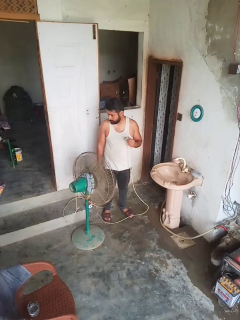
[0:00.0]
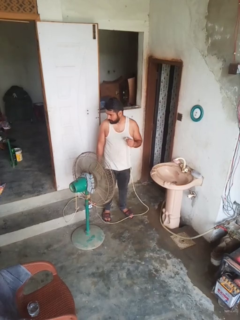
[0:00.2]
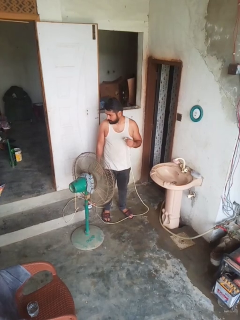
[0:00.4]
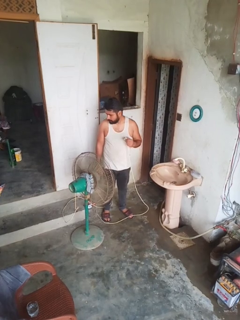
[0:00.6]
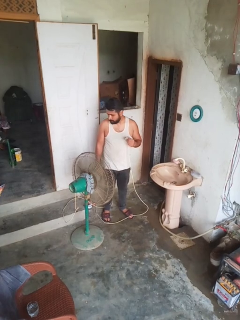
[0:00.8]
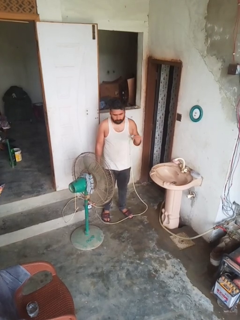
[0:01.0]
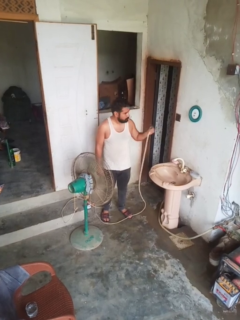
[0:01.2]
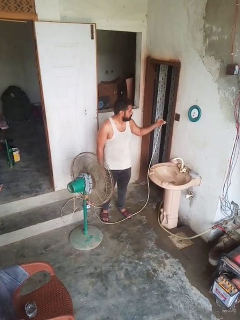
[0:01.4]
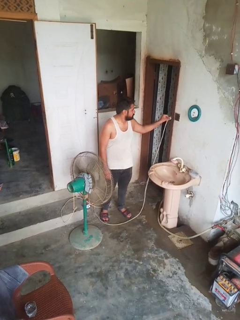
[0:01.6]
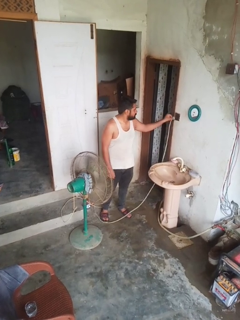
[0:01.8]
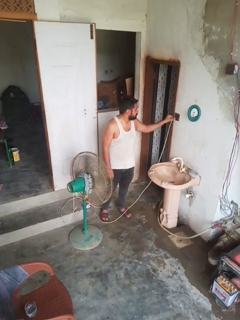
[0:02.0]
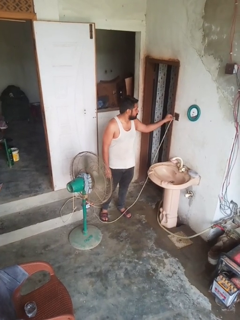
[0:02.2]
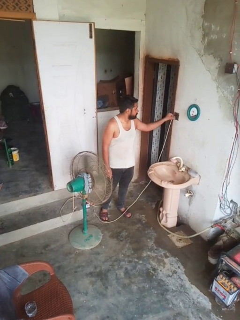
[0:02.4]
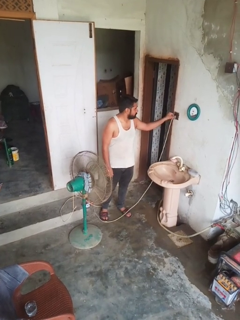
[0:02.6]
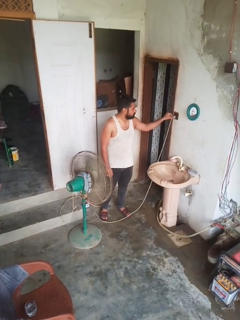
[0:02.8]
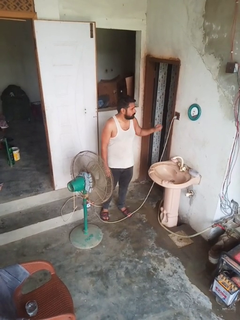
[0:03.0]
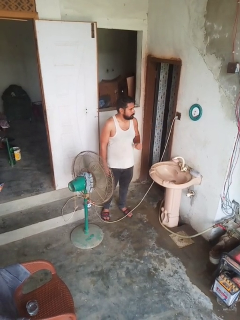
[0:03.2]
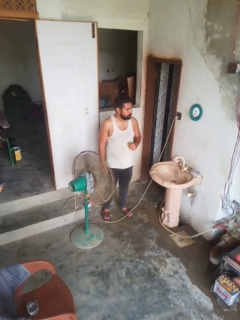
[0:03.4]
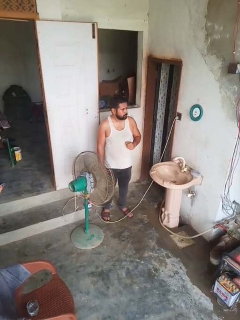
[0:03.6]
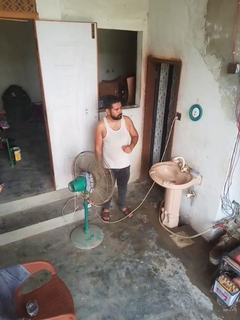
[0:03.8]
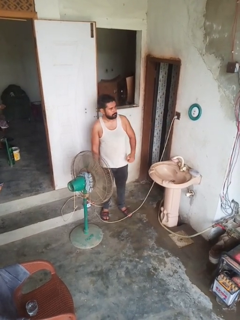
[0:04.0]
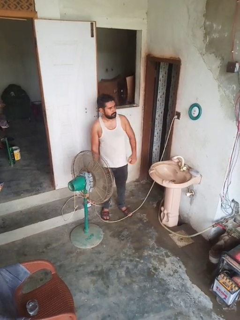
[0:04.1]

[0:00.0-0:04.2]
person turns on fan

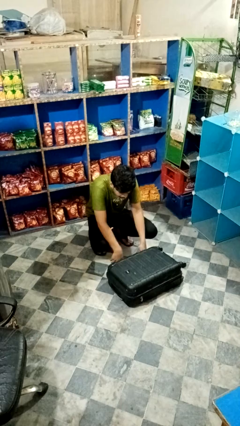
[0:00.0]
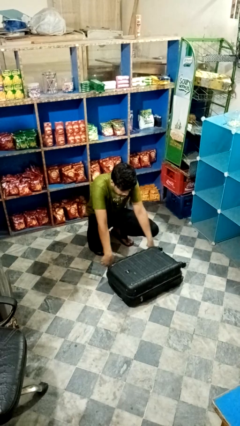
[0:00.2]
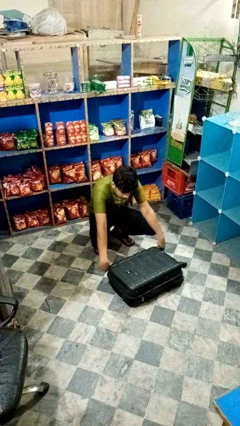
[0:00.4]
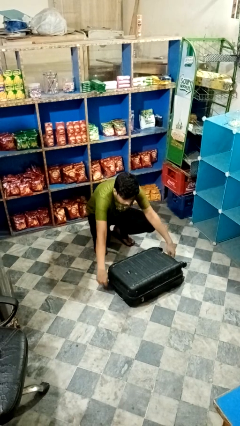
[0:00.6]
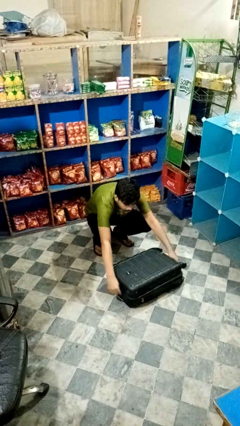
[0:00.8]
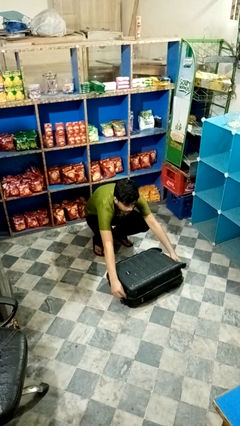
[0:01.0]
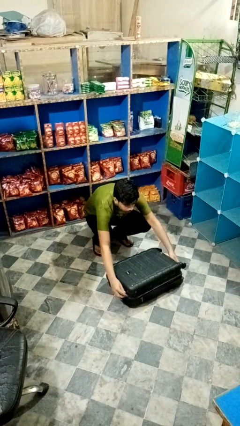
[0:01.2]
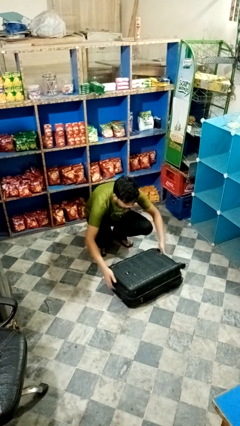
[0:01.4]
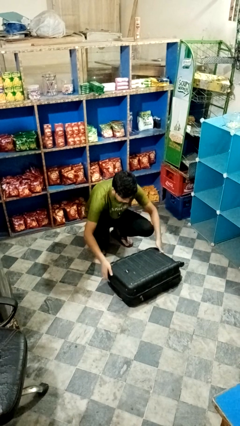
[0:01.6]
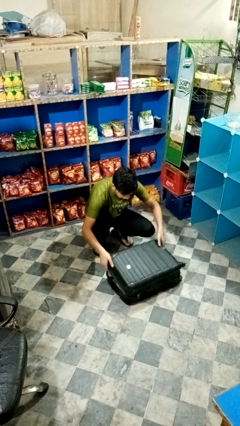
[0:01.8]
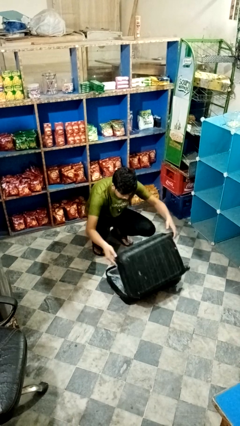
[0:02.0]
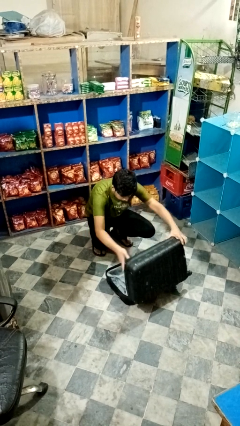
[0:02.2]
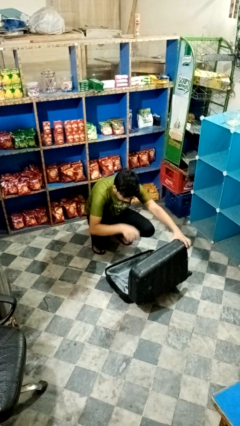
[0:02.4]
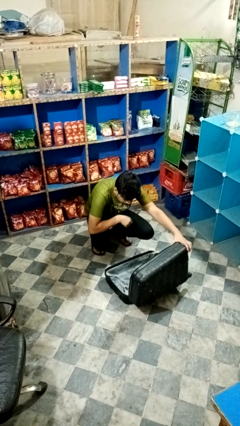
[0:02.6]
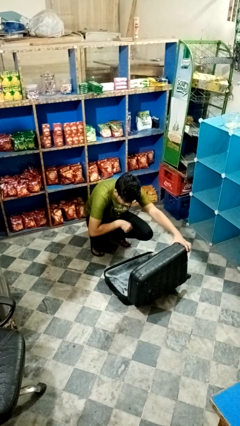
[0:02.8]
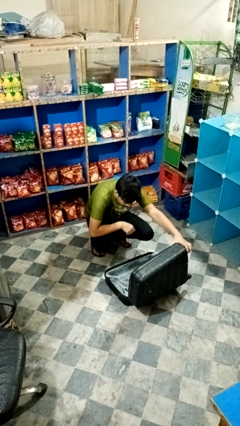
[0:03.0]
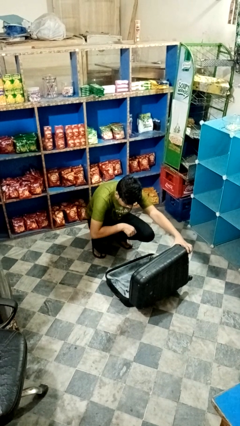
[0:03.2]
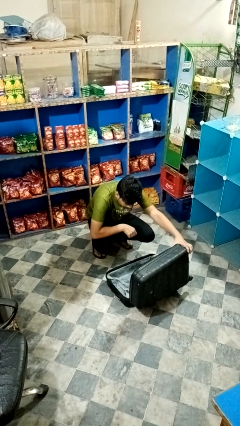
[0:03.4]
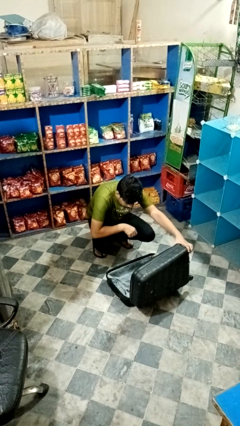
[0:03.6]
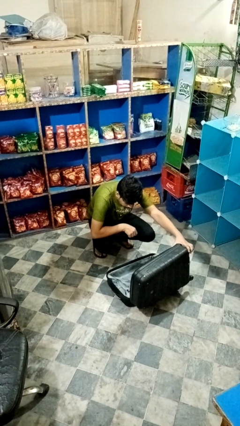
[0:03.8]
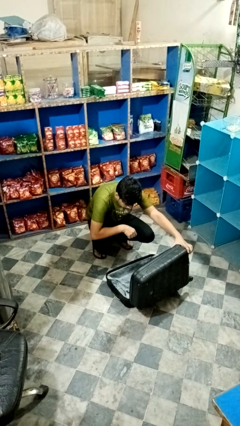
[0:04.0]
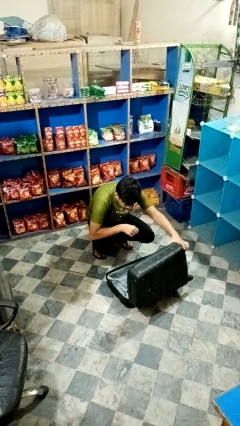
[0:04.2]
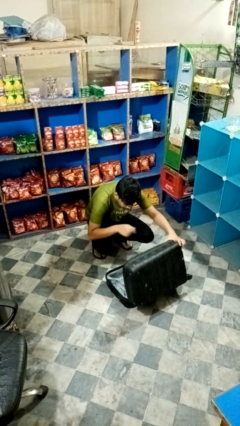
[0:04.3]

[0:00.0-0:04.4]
person opens suitcase

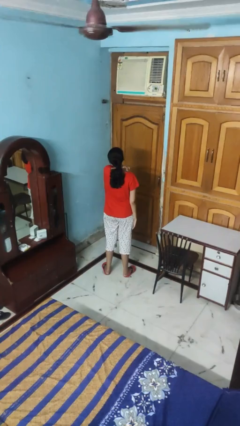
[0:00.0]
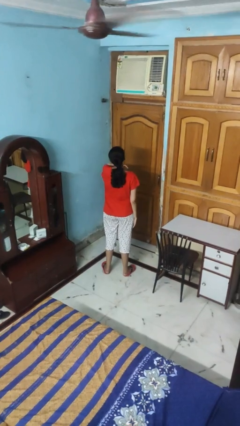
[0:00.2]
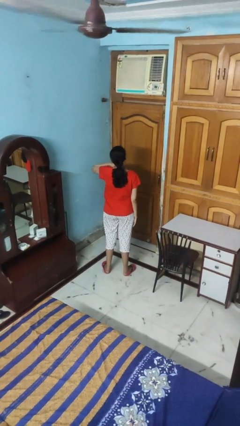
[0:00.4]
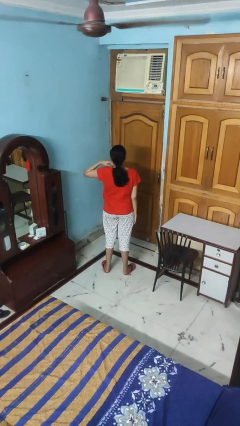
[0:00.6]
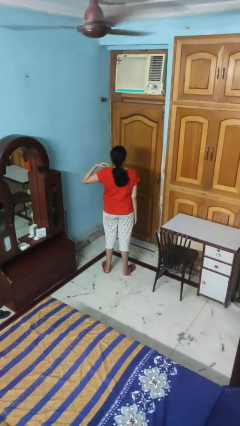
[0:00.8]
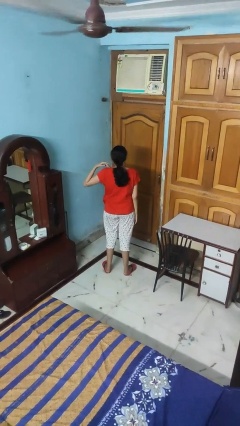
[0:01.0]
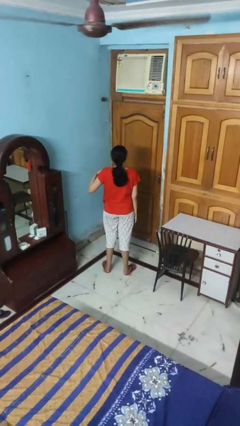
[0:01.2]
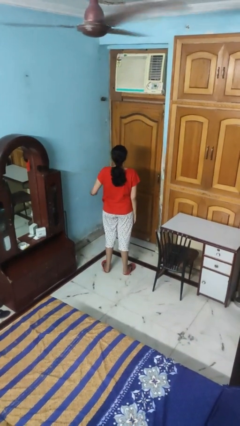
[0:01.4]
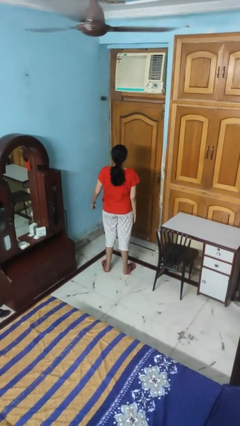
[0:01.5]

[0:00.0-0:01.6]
person gestures cut

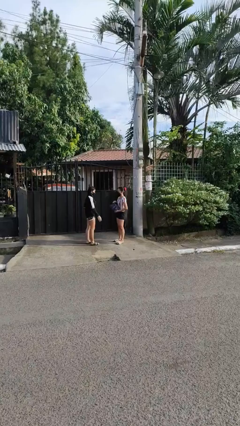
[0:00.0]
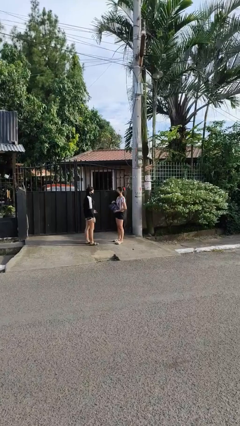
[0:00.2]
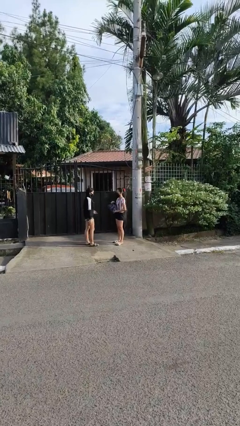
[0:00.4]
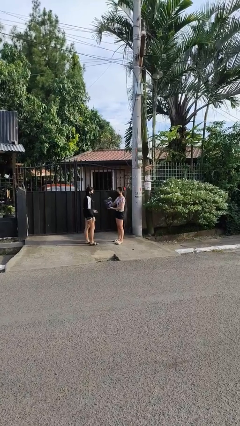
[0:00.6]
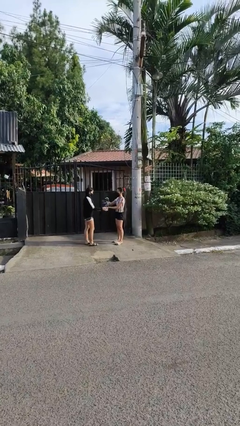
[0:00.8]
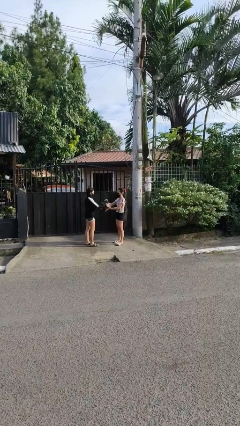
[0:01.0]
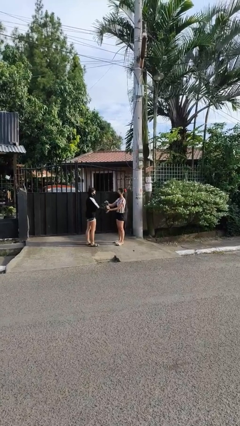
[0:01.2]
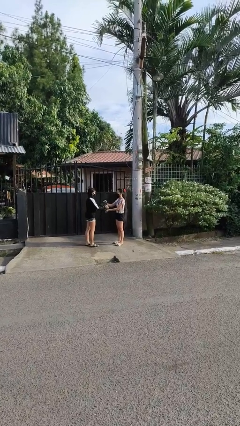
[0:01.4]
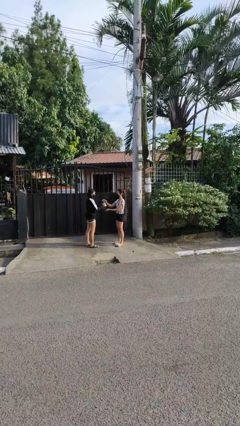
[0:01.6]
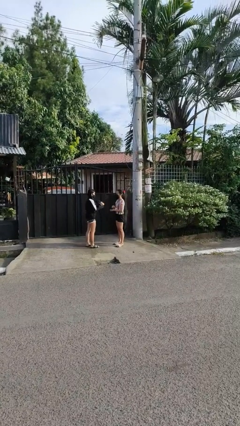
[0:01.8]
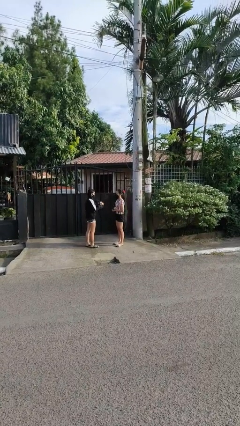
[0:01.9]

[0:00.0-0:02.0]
person transfers object to person

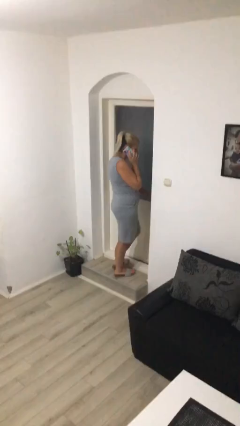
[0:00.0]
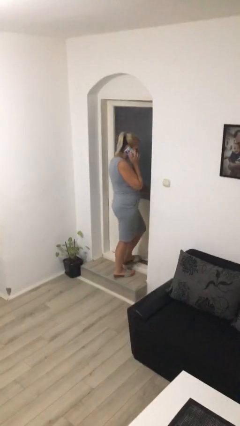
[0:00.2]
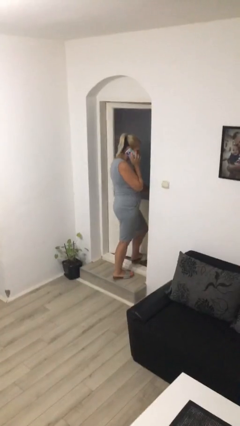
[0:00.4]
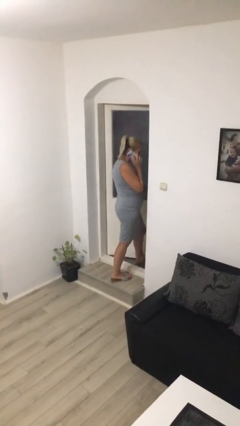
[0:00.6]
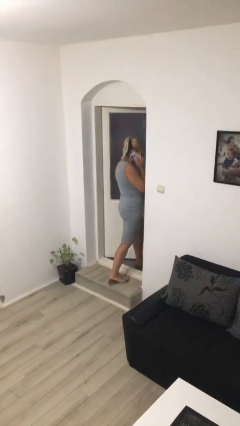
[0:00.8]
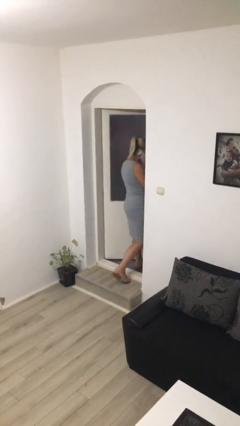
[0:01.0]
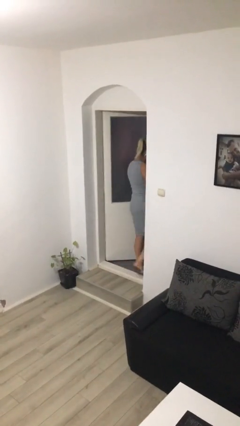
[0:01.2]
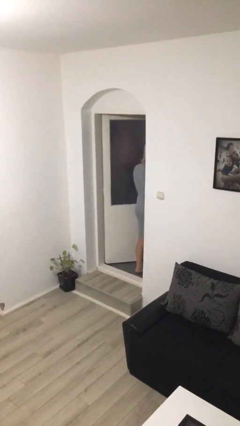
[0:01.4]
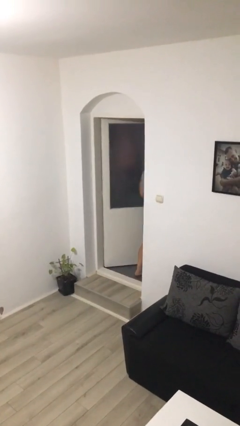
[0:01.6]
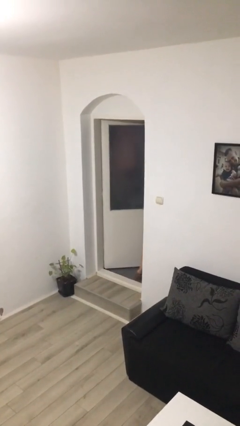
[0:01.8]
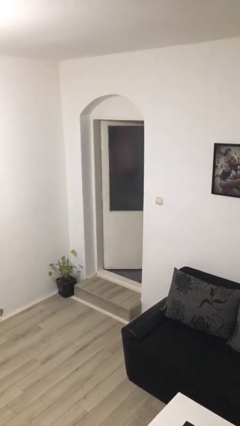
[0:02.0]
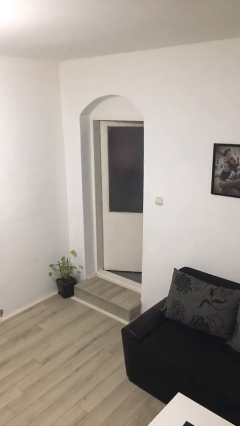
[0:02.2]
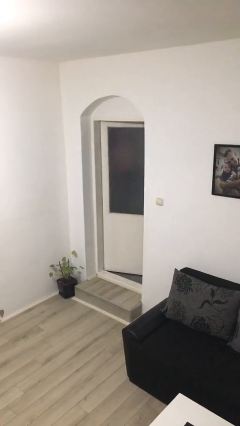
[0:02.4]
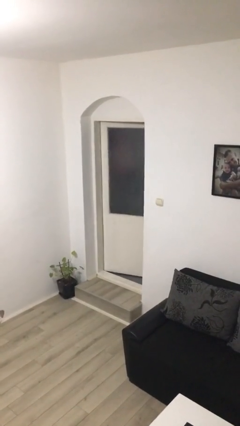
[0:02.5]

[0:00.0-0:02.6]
person exits scene through structure

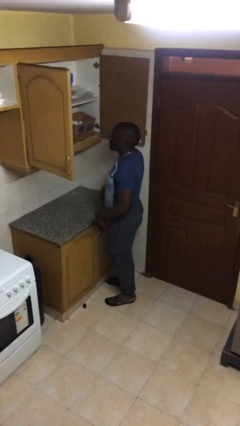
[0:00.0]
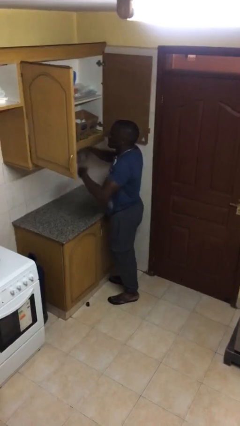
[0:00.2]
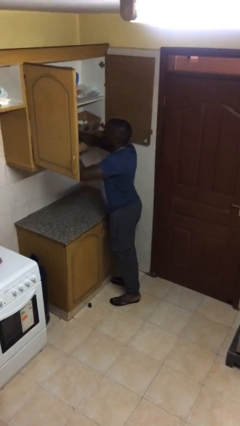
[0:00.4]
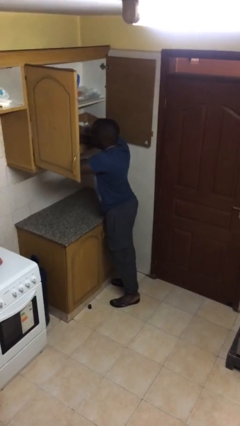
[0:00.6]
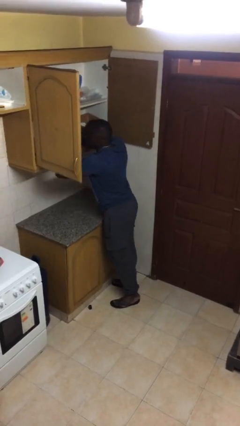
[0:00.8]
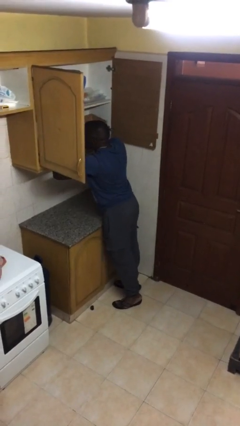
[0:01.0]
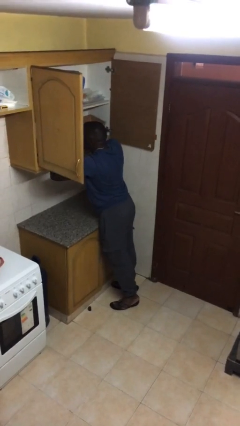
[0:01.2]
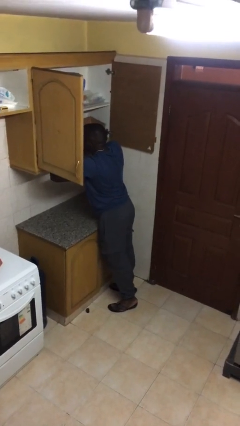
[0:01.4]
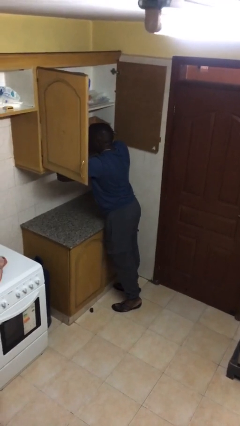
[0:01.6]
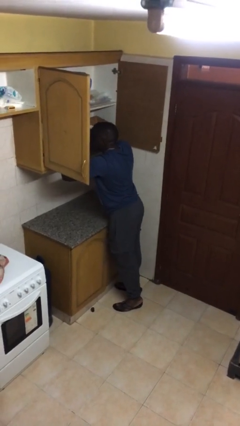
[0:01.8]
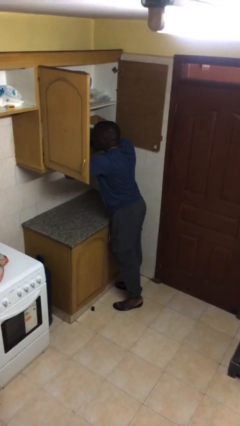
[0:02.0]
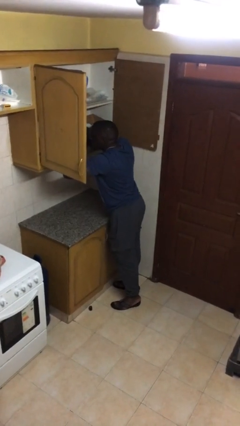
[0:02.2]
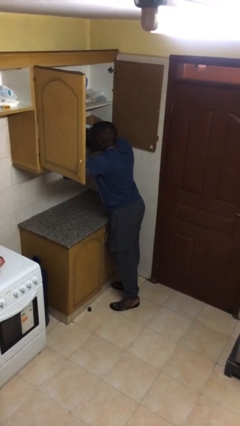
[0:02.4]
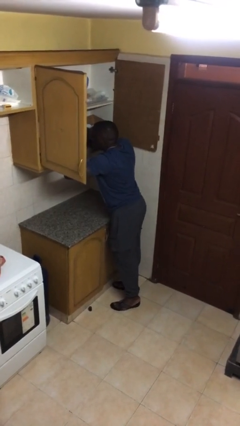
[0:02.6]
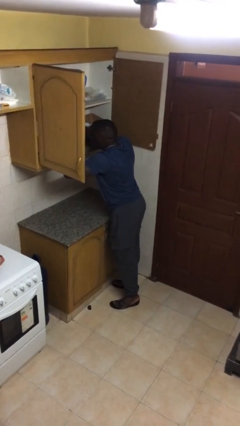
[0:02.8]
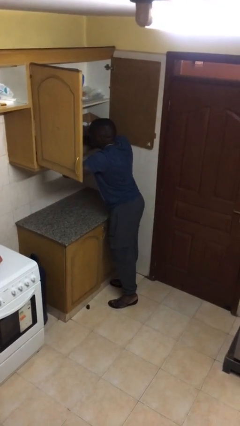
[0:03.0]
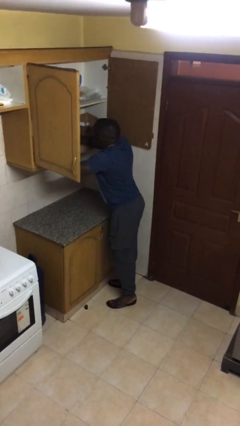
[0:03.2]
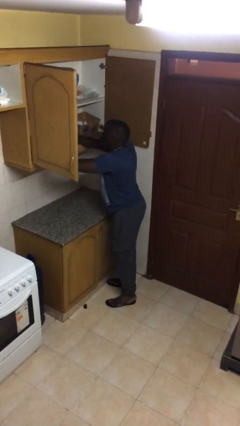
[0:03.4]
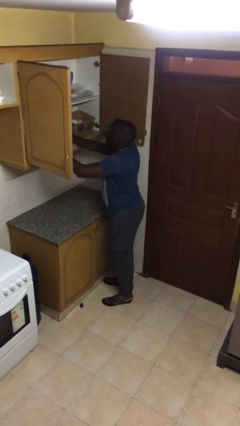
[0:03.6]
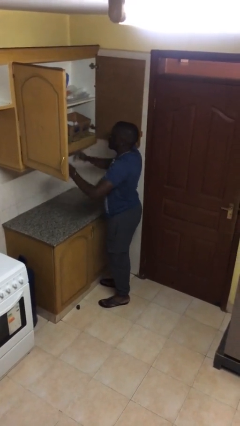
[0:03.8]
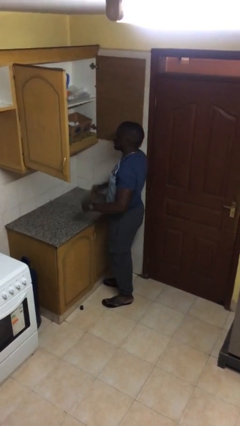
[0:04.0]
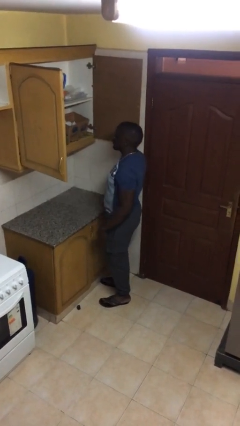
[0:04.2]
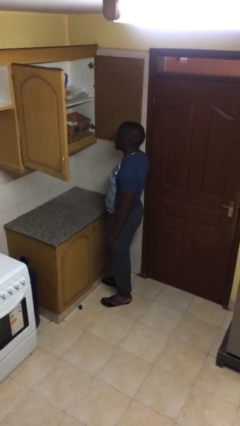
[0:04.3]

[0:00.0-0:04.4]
person searches in cabinet
